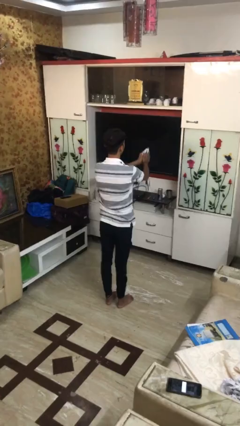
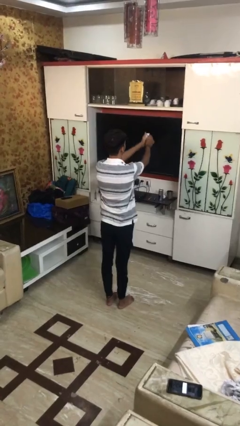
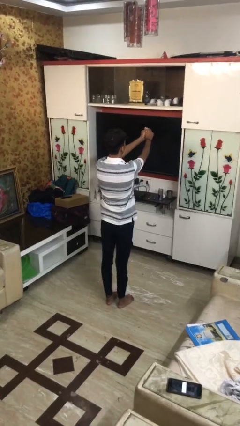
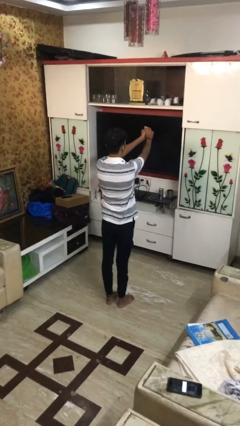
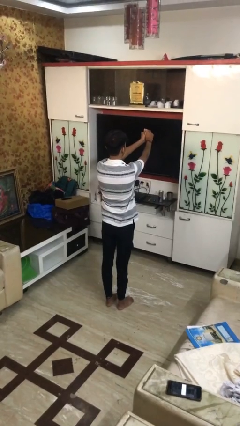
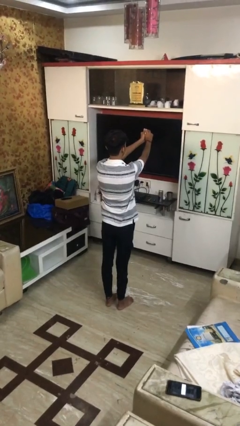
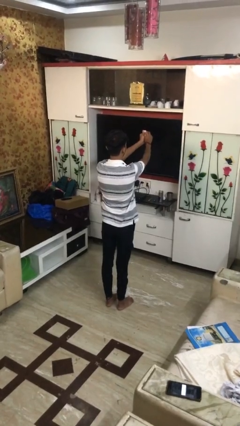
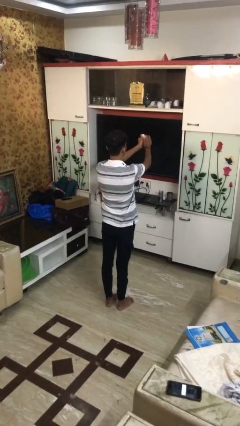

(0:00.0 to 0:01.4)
person crumples paper

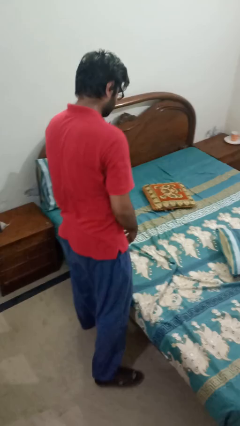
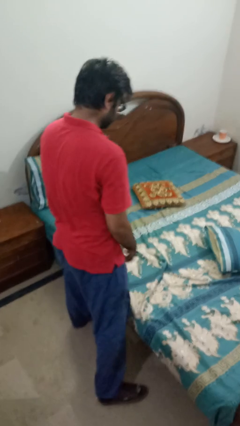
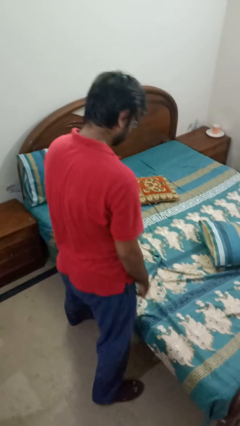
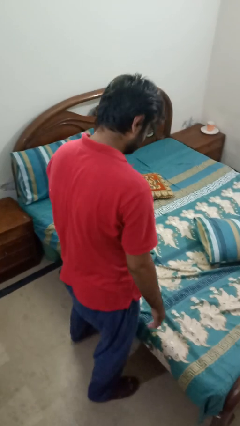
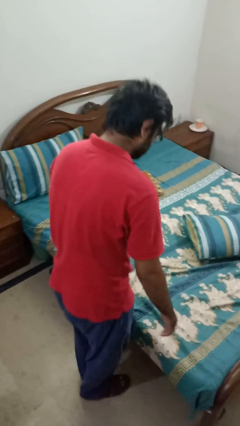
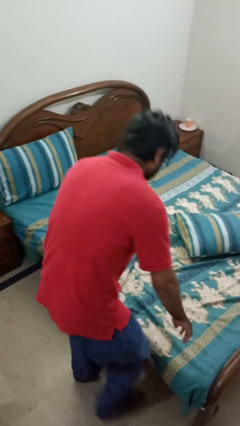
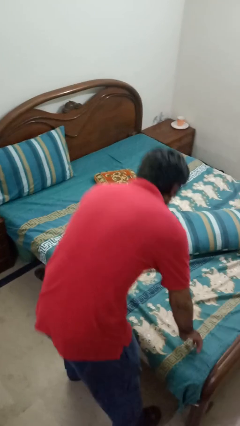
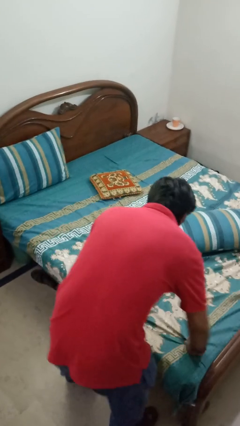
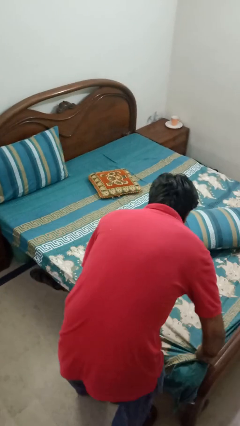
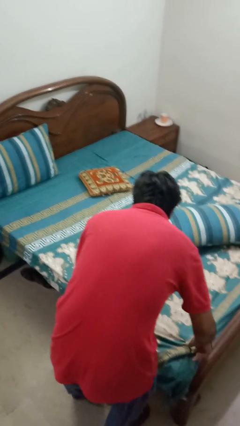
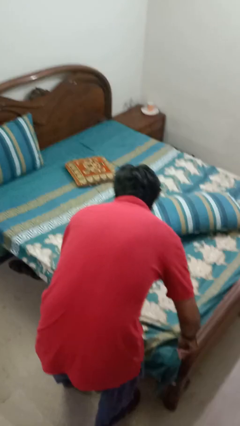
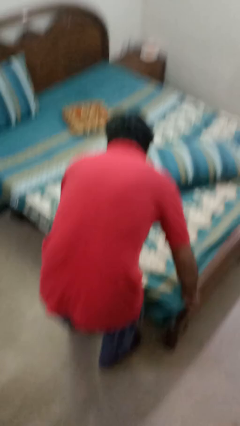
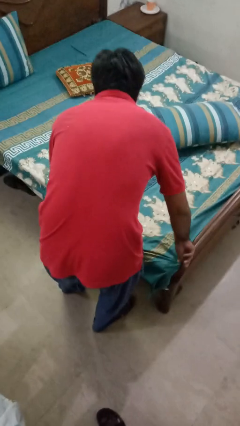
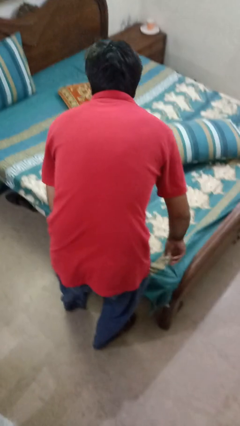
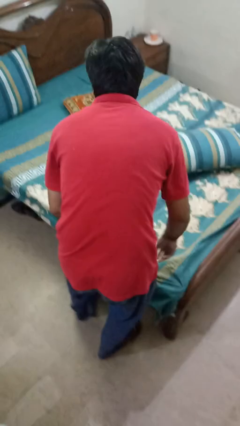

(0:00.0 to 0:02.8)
person makes bed

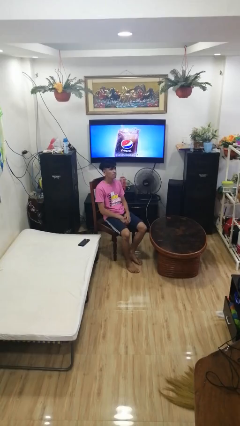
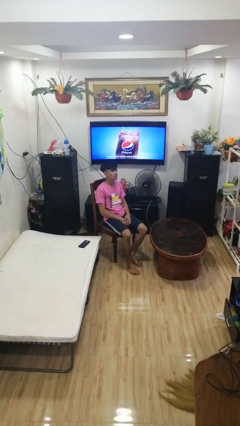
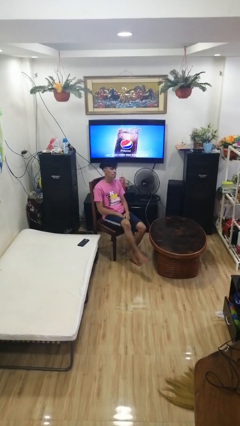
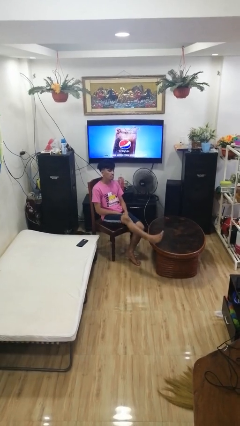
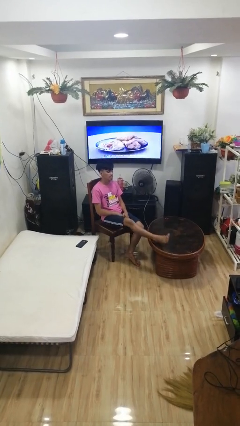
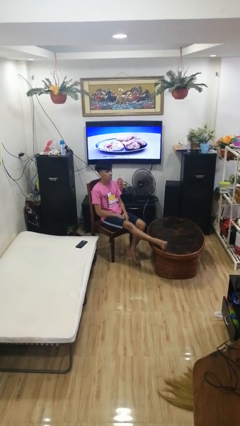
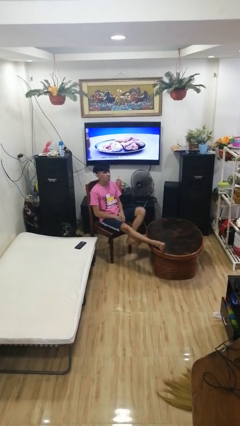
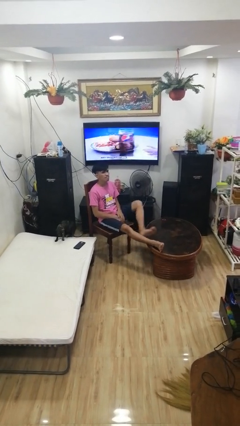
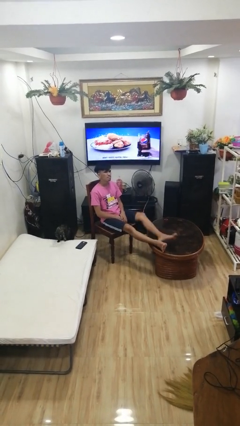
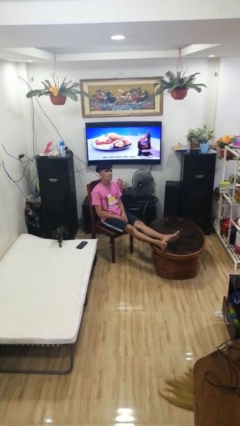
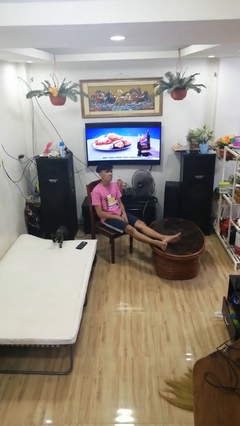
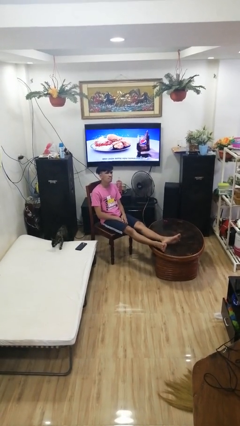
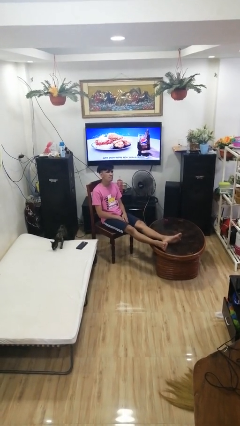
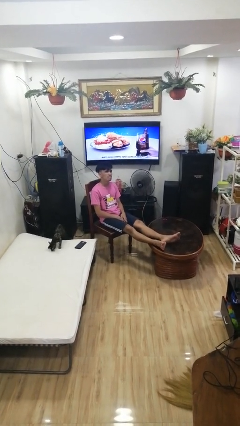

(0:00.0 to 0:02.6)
person puts feet up

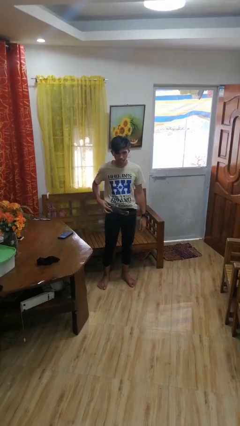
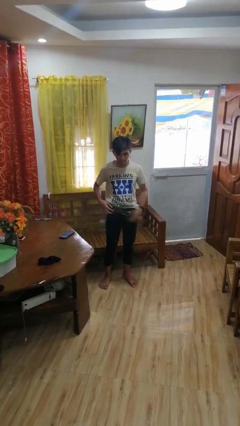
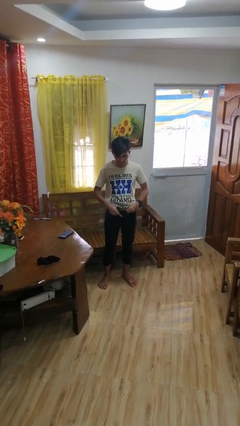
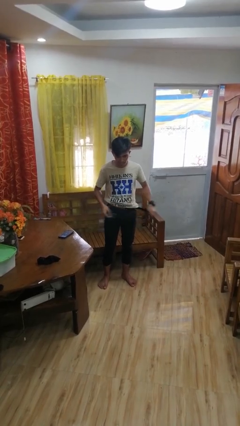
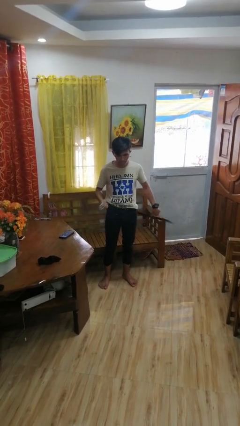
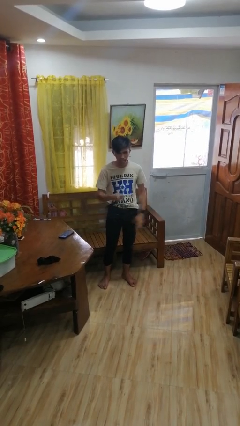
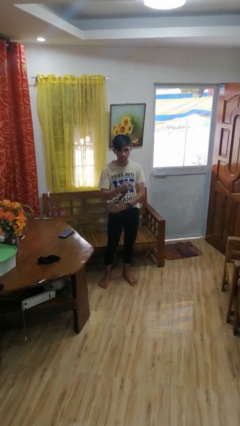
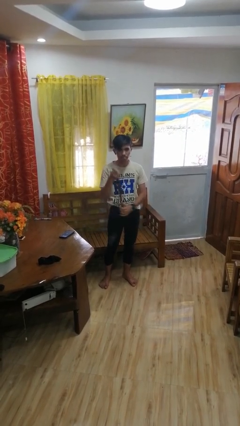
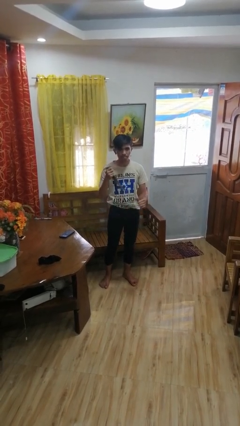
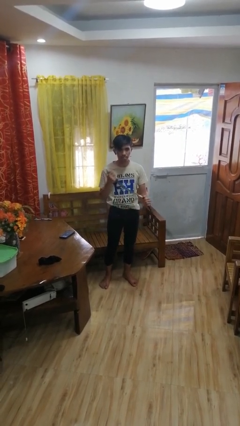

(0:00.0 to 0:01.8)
person takes off belt

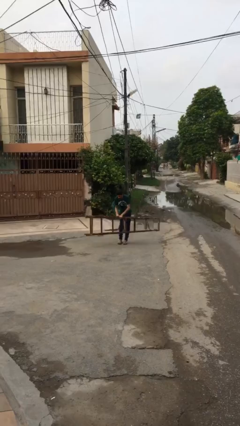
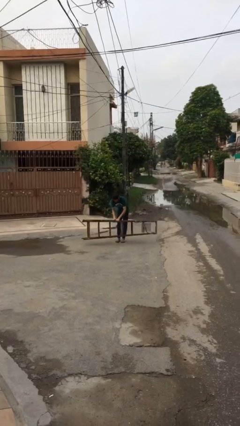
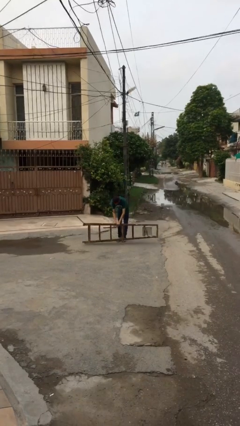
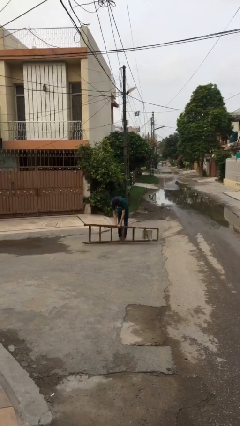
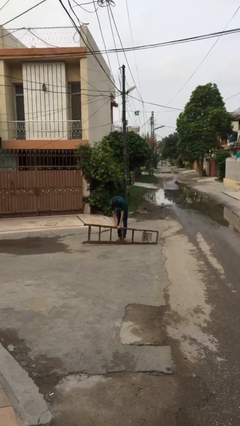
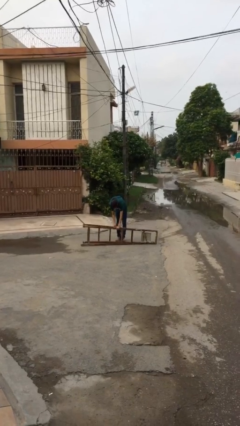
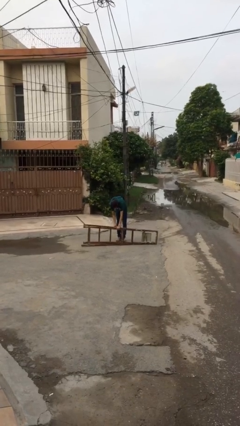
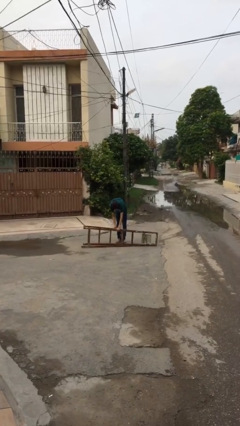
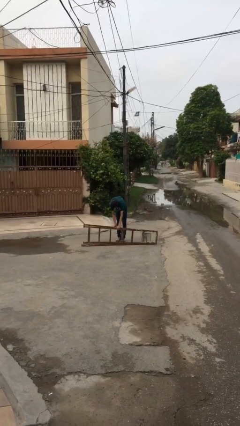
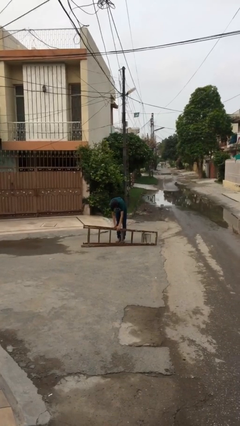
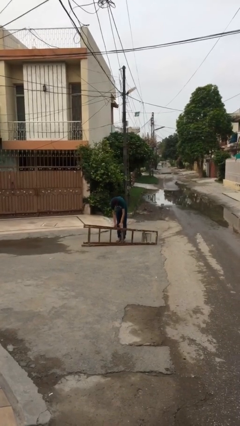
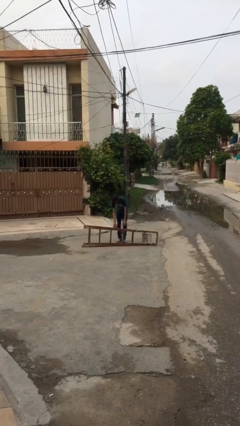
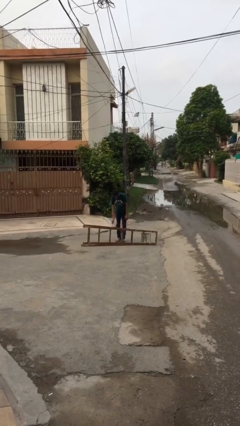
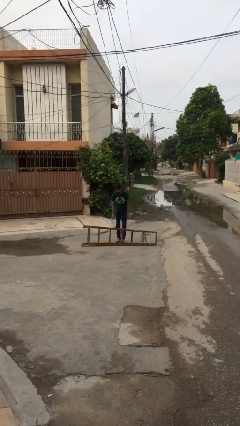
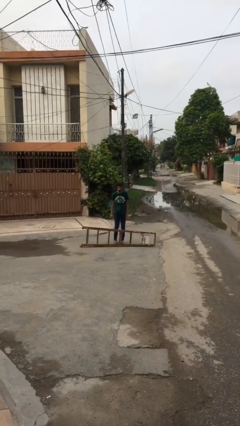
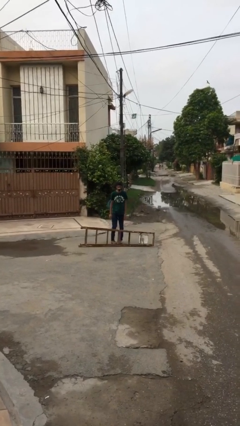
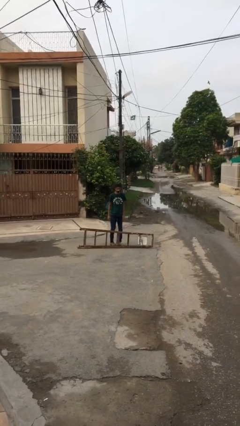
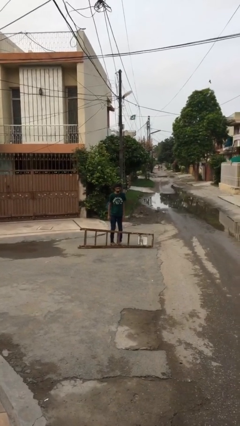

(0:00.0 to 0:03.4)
person puts down object on floor

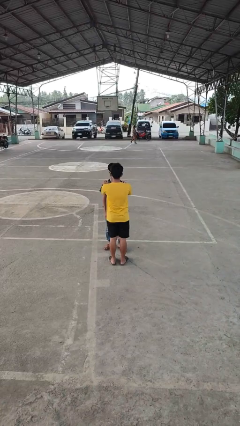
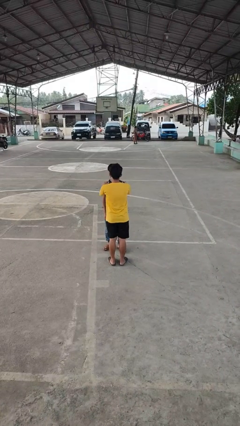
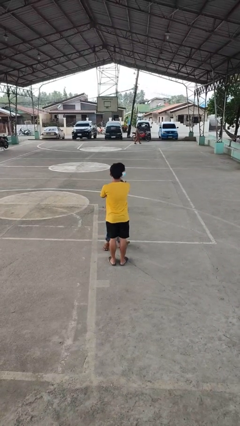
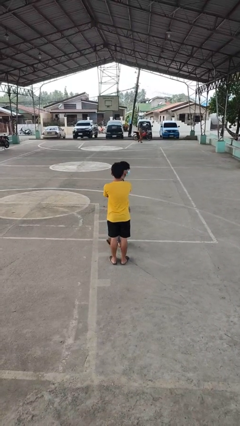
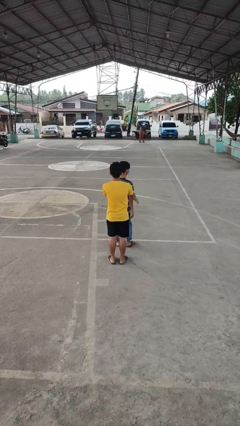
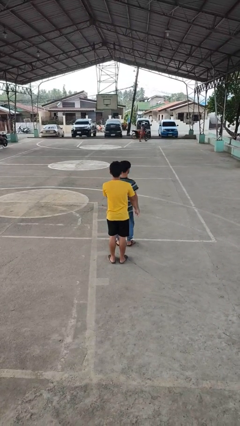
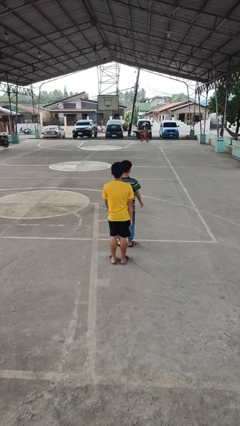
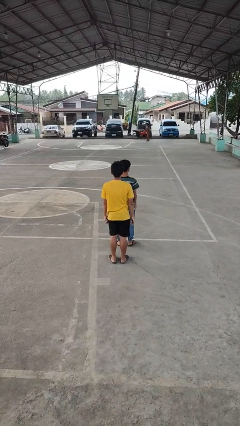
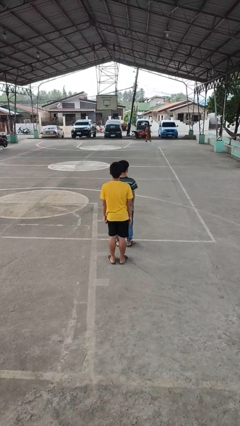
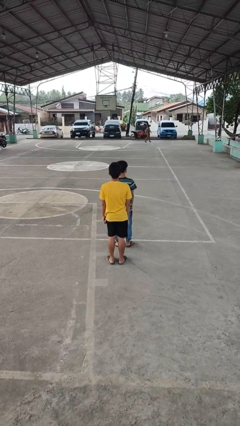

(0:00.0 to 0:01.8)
person spins person around

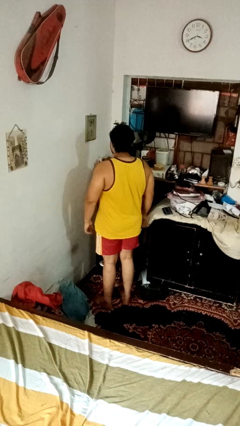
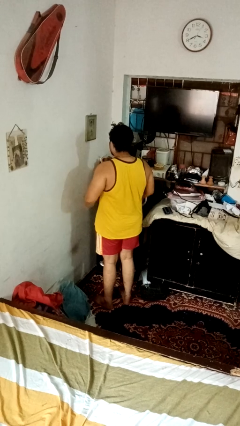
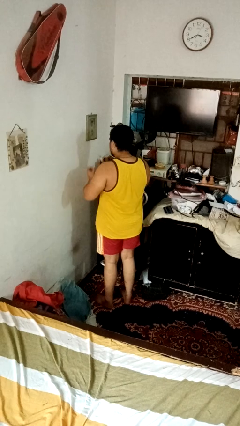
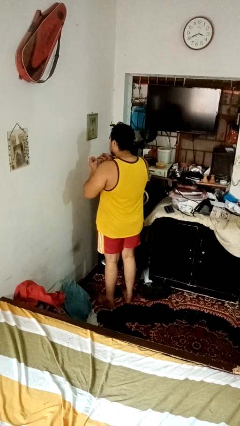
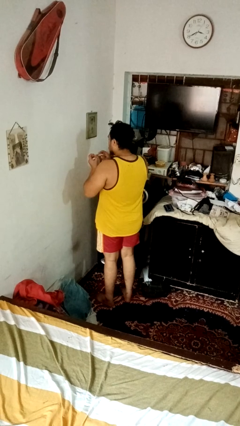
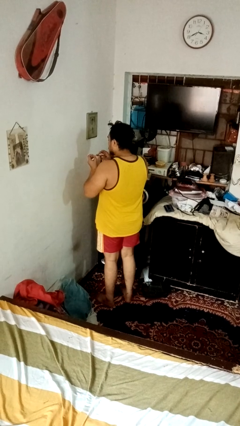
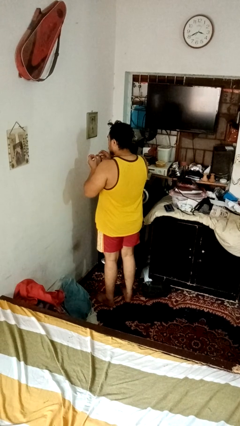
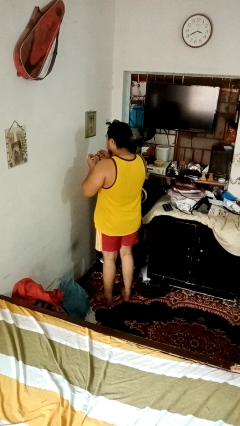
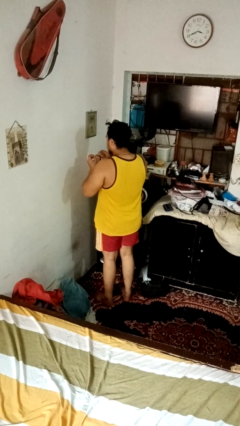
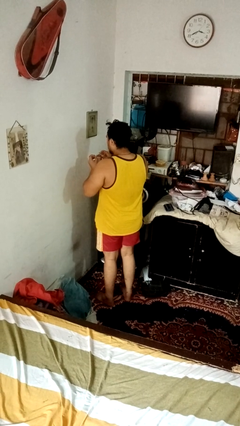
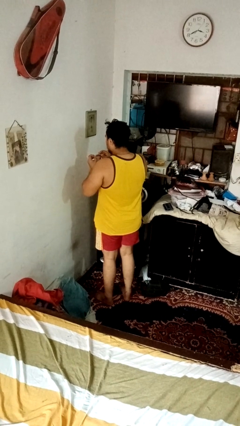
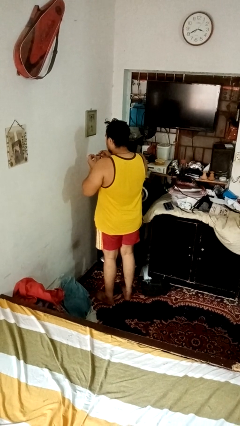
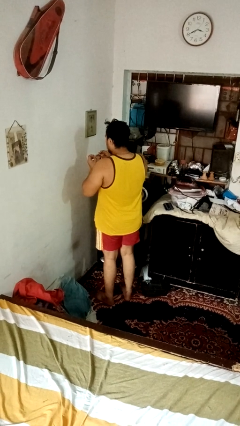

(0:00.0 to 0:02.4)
person clips fingernails

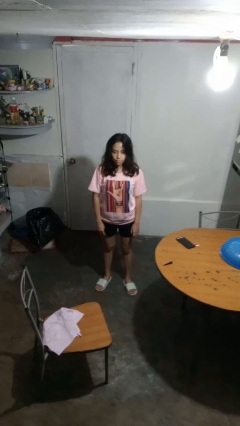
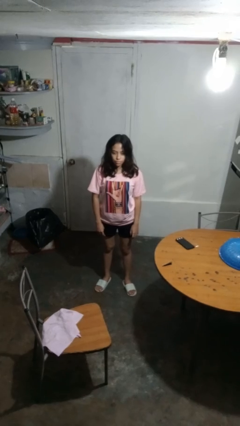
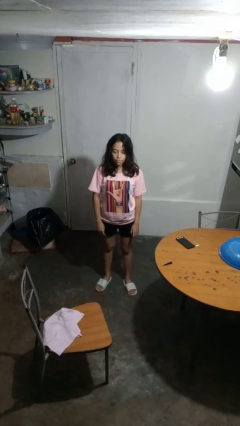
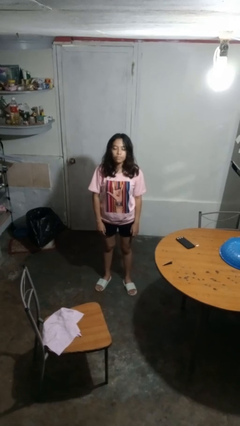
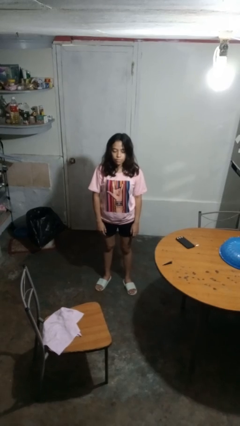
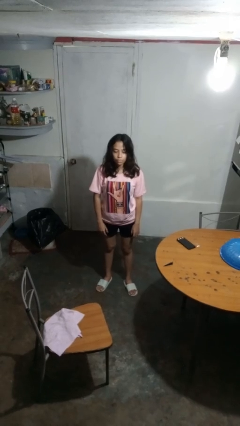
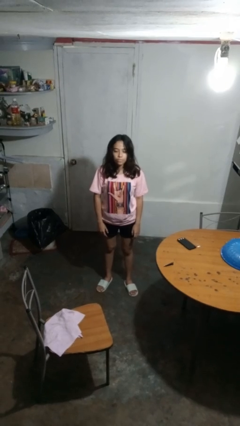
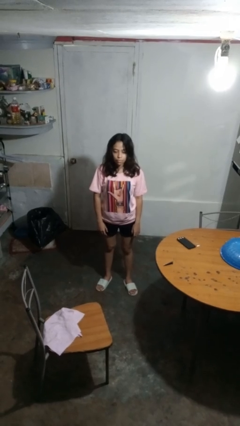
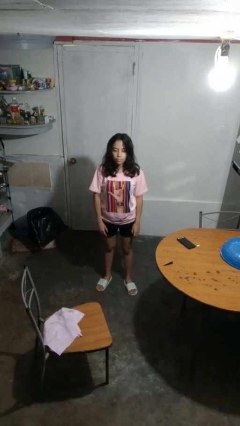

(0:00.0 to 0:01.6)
person nods head
